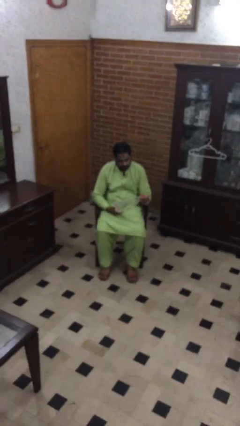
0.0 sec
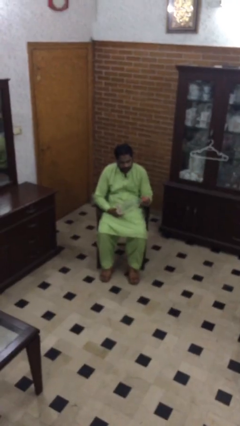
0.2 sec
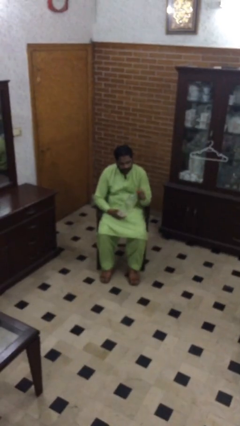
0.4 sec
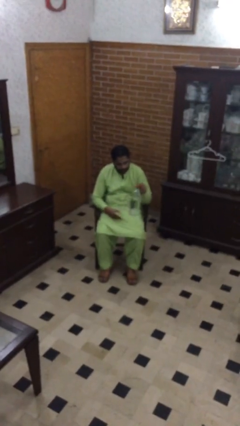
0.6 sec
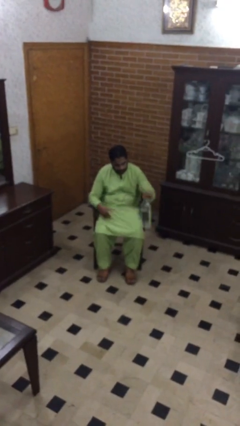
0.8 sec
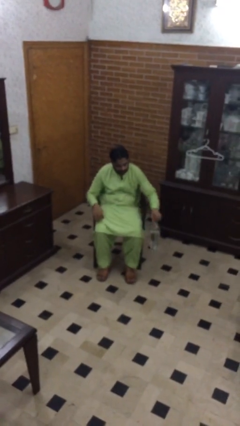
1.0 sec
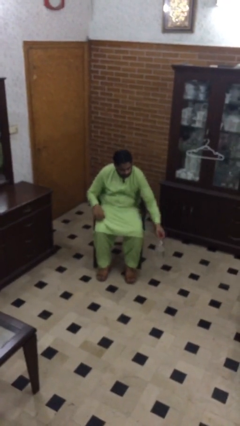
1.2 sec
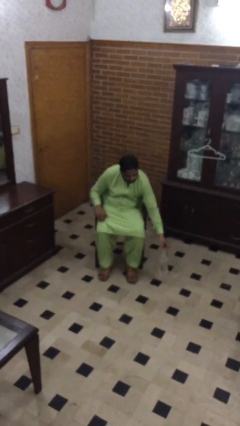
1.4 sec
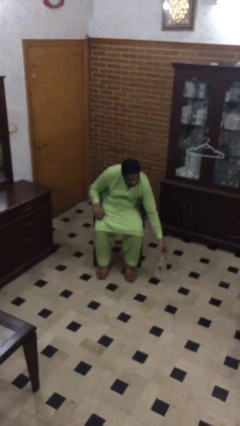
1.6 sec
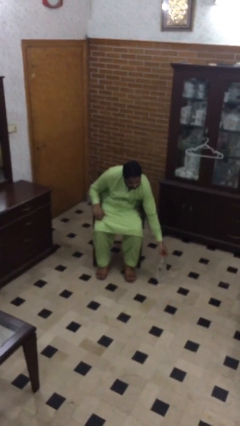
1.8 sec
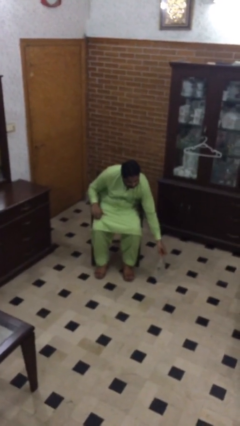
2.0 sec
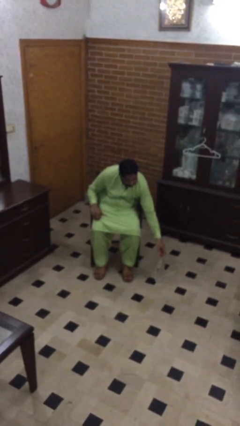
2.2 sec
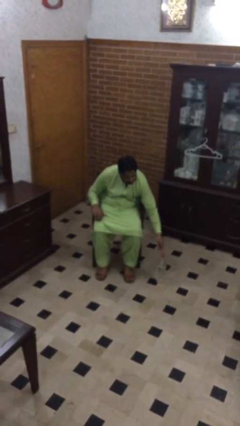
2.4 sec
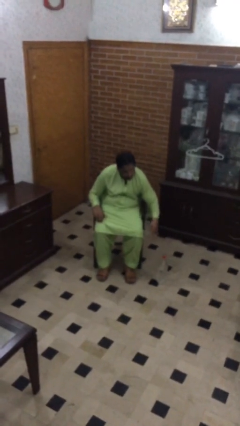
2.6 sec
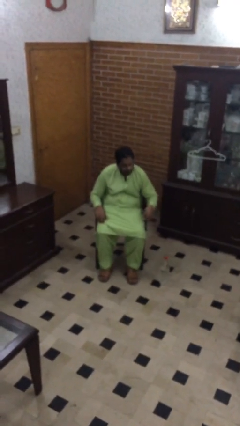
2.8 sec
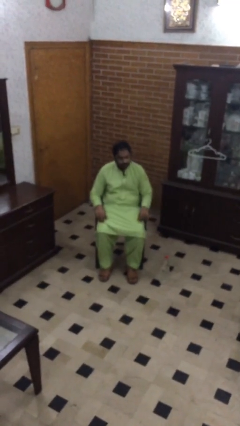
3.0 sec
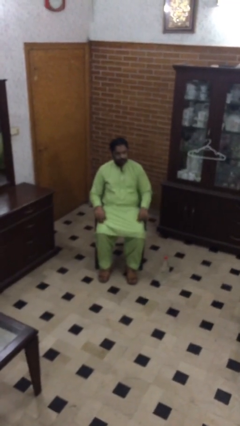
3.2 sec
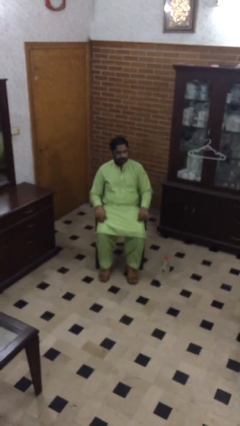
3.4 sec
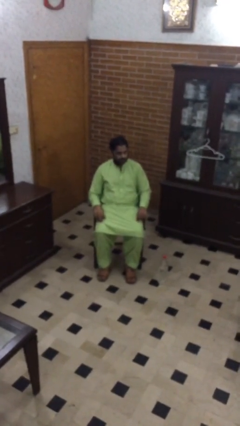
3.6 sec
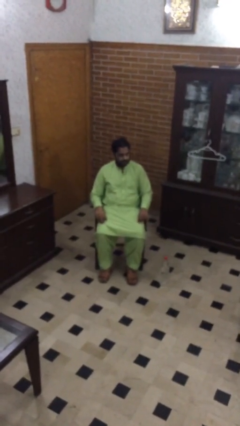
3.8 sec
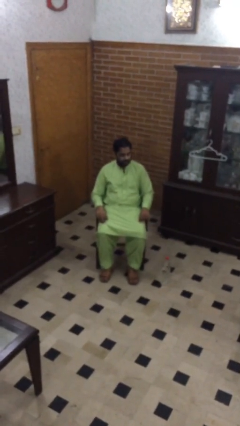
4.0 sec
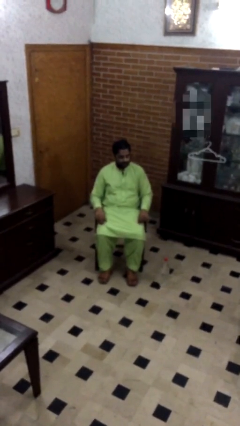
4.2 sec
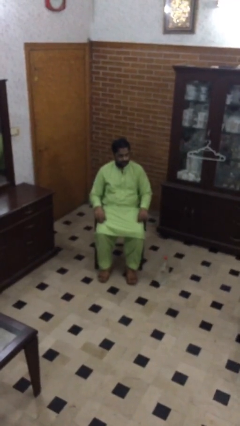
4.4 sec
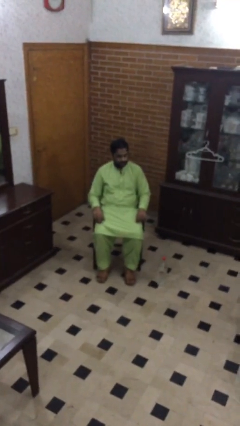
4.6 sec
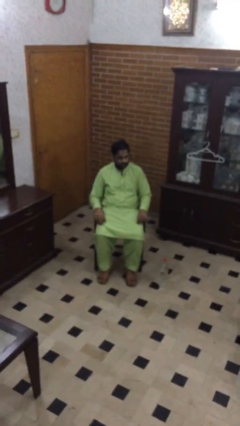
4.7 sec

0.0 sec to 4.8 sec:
person puts down object on floor

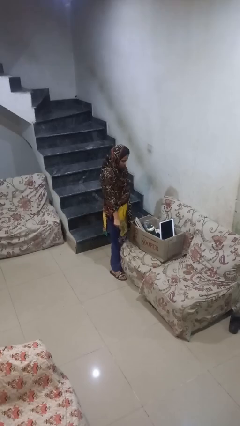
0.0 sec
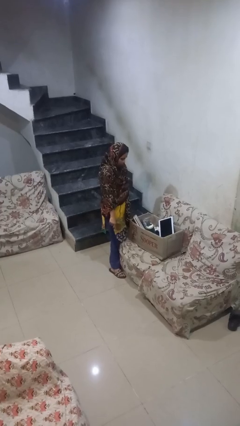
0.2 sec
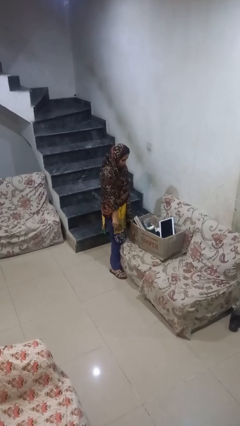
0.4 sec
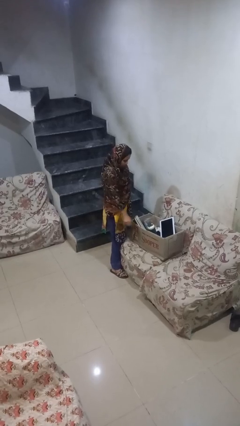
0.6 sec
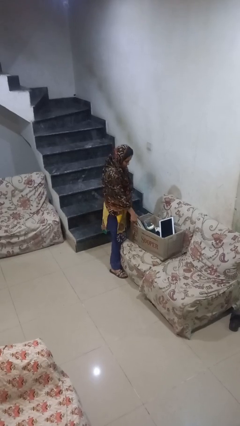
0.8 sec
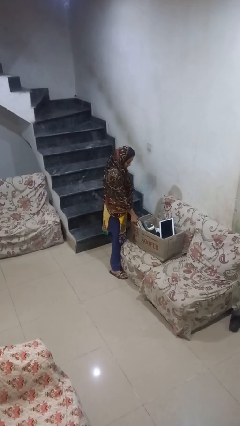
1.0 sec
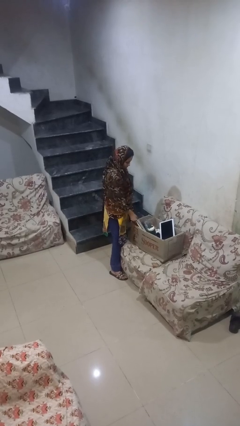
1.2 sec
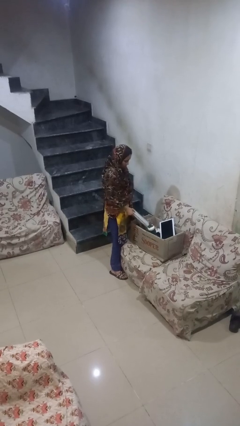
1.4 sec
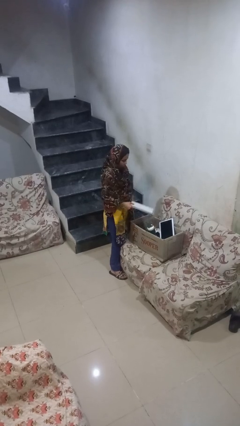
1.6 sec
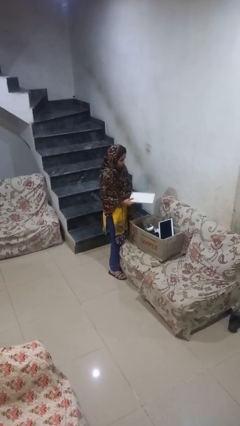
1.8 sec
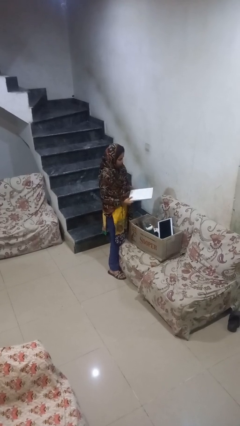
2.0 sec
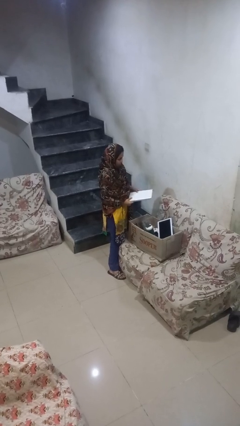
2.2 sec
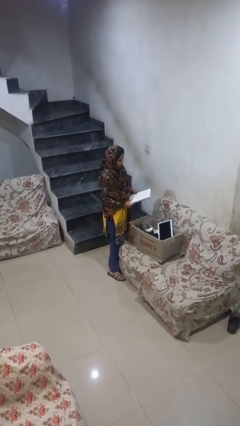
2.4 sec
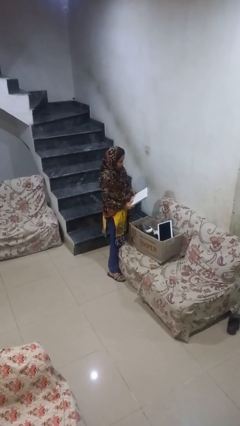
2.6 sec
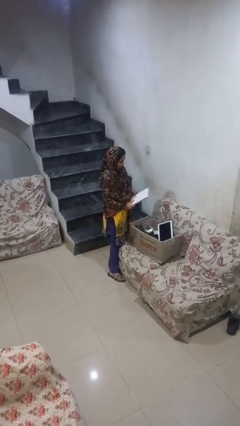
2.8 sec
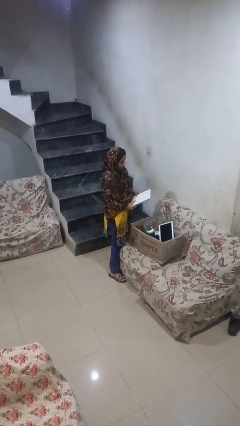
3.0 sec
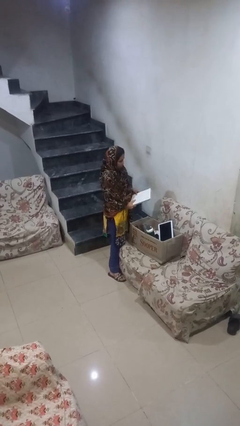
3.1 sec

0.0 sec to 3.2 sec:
person takes object from box

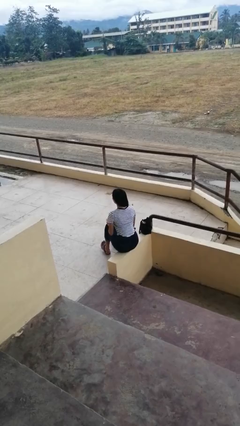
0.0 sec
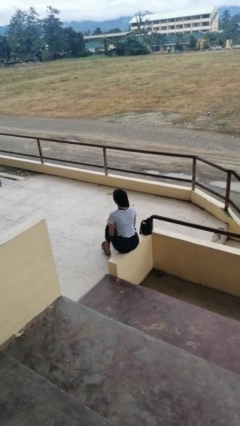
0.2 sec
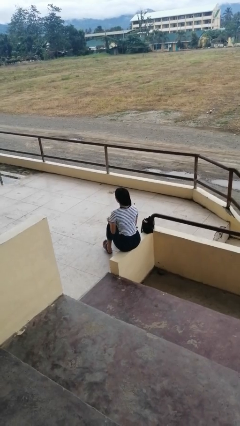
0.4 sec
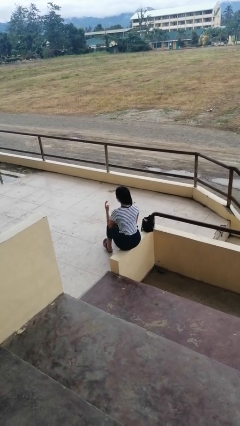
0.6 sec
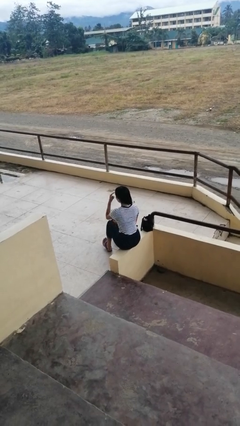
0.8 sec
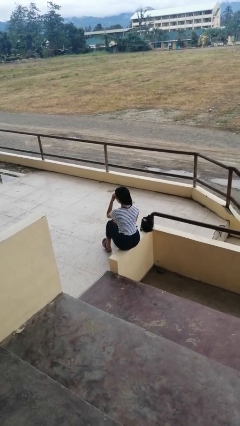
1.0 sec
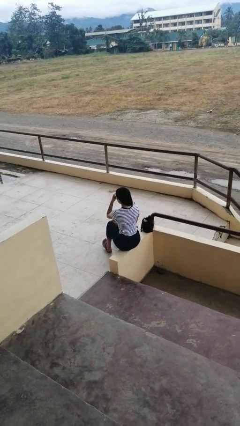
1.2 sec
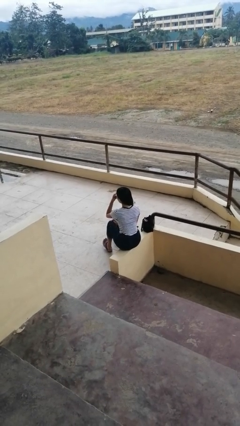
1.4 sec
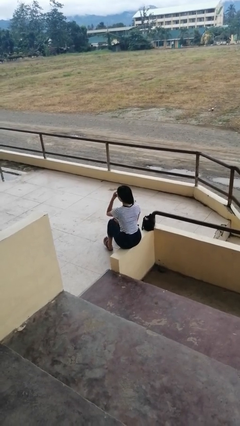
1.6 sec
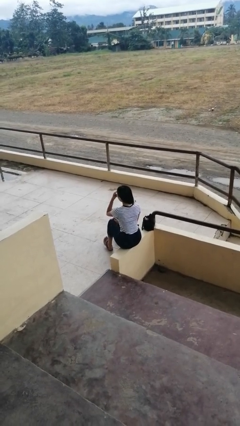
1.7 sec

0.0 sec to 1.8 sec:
person gestures watch closely

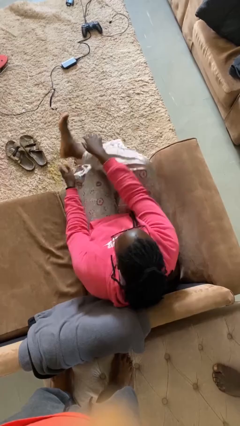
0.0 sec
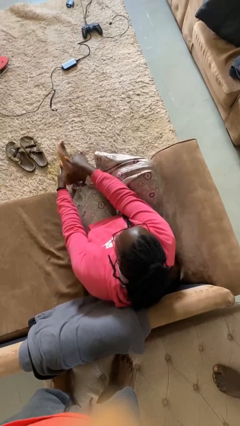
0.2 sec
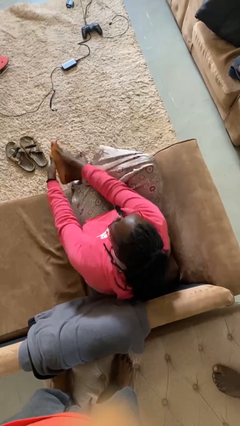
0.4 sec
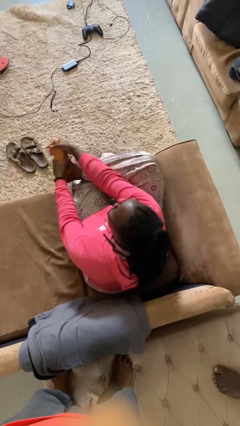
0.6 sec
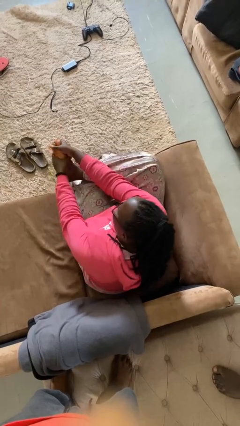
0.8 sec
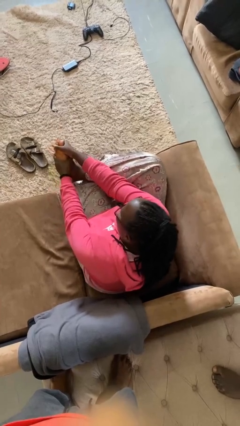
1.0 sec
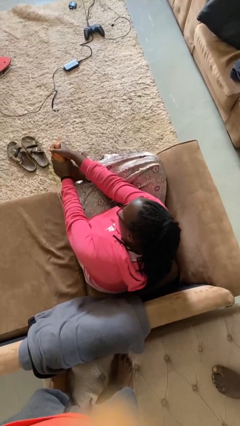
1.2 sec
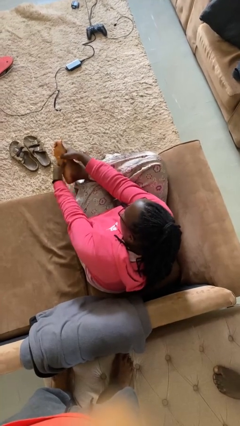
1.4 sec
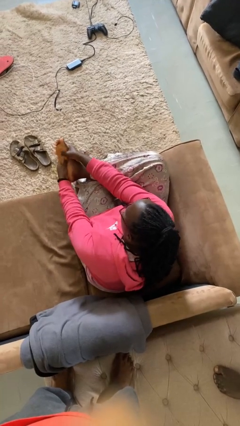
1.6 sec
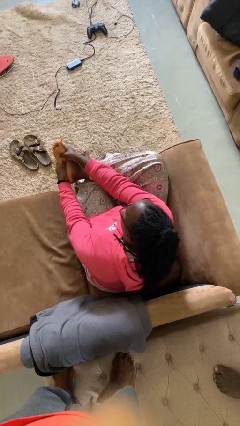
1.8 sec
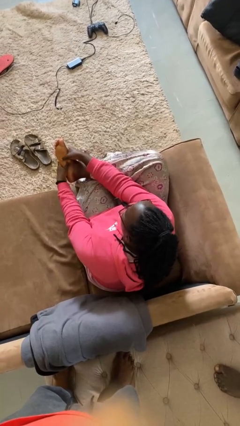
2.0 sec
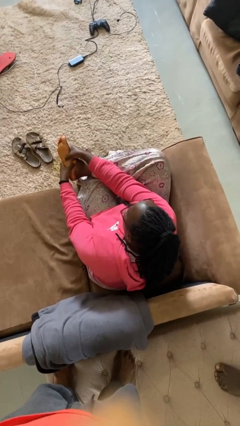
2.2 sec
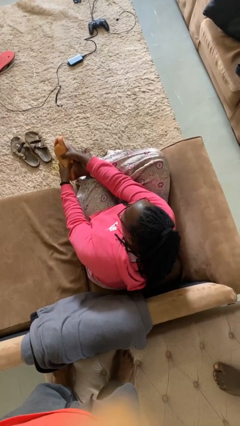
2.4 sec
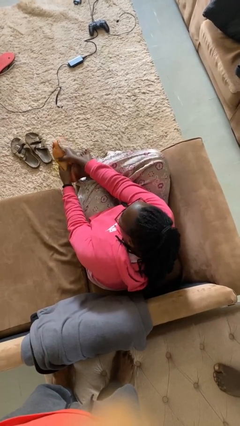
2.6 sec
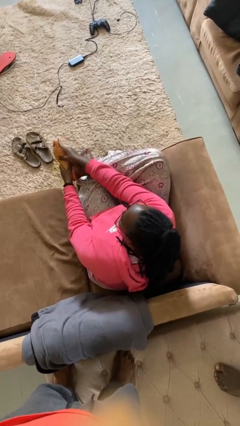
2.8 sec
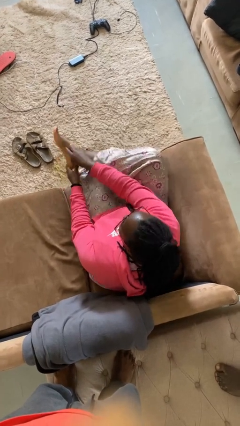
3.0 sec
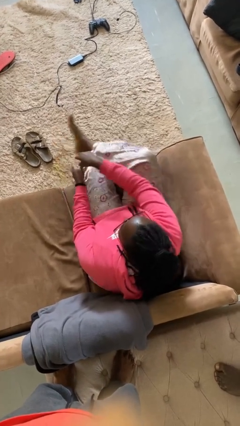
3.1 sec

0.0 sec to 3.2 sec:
person rubs foot

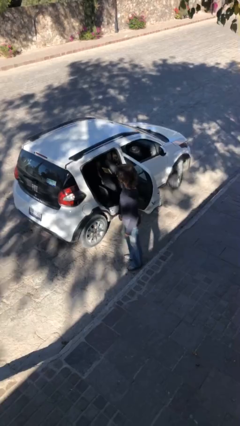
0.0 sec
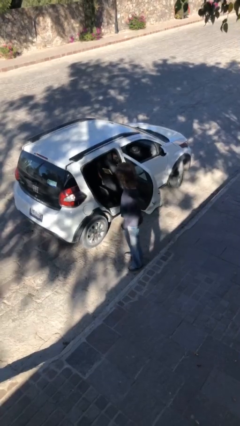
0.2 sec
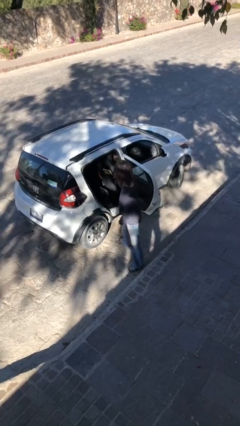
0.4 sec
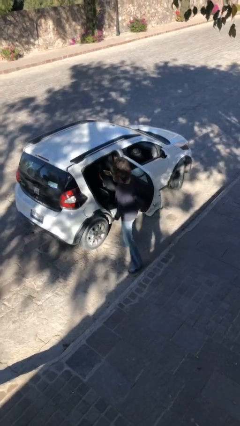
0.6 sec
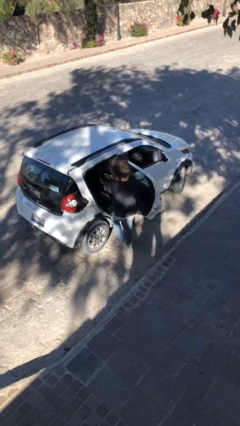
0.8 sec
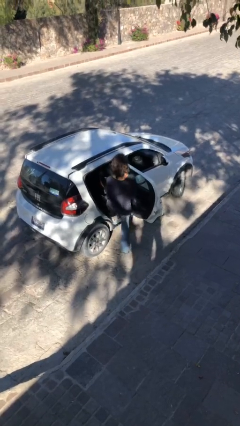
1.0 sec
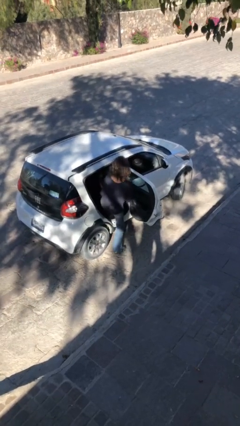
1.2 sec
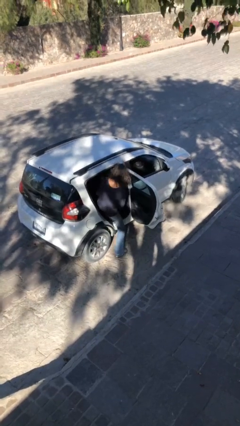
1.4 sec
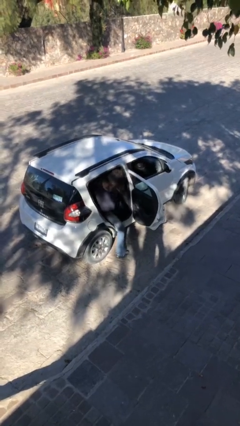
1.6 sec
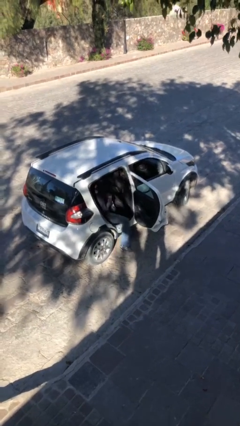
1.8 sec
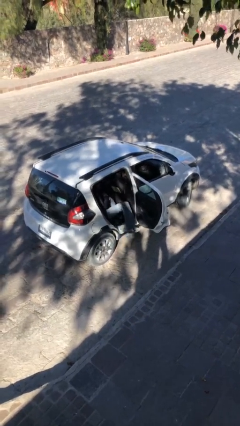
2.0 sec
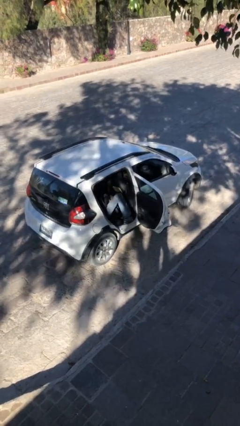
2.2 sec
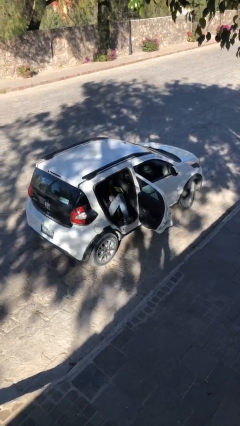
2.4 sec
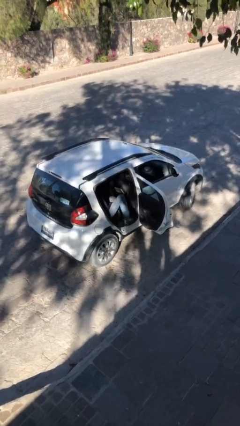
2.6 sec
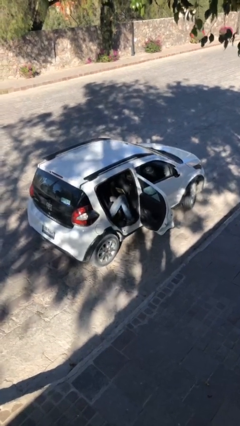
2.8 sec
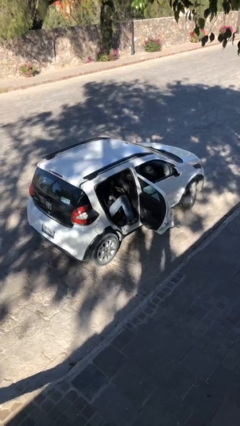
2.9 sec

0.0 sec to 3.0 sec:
person enters car

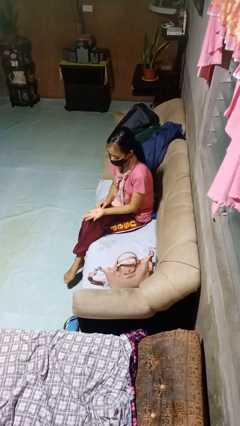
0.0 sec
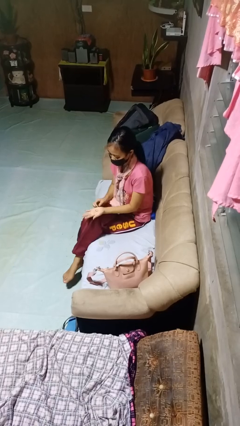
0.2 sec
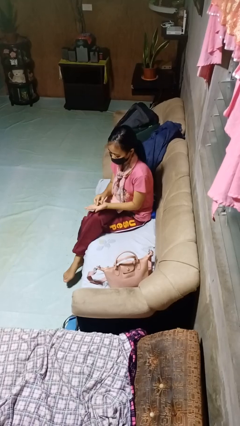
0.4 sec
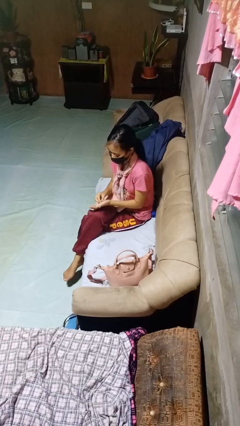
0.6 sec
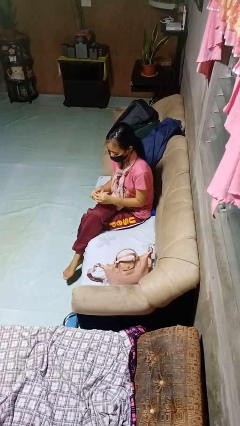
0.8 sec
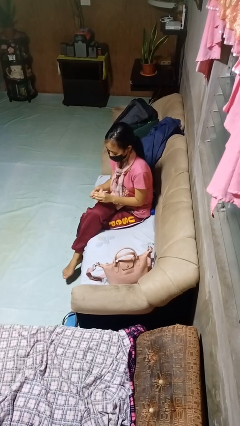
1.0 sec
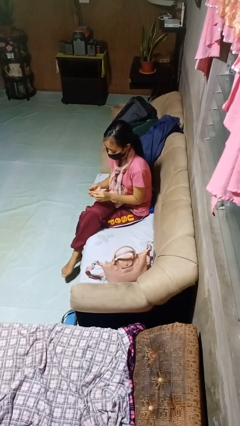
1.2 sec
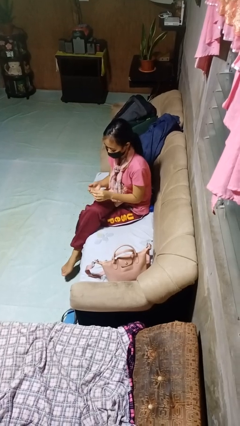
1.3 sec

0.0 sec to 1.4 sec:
person puts on ring
